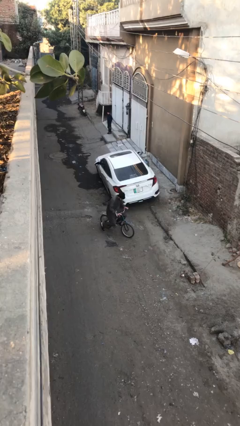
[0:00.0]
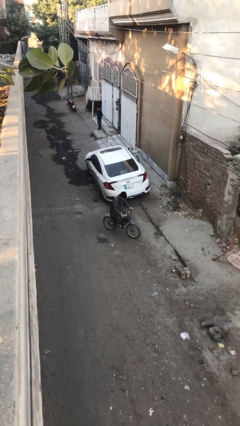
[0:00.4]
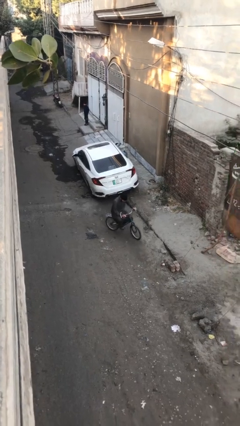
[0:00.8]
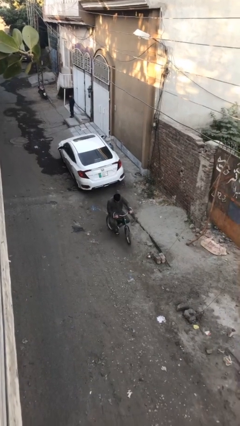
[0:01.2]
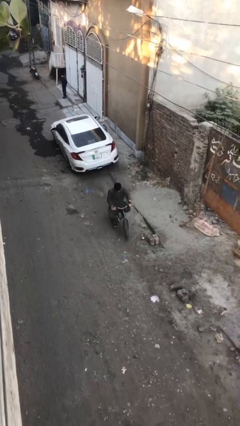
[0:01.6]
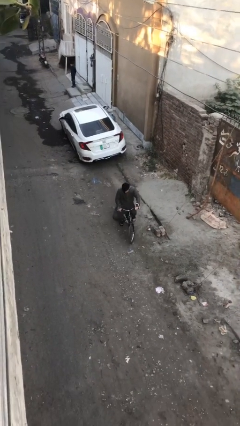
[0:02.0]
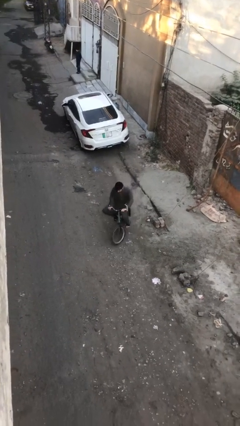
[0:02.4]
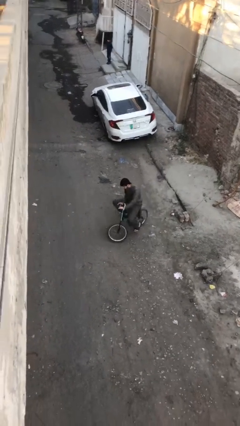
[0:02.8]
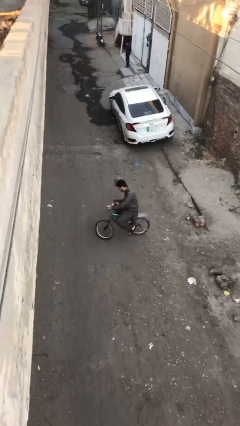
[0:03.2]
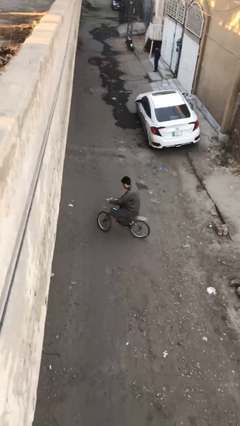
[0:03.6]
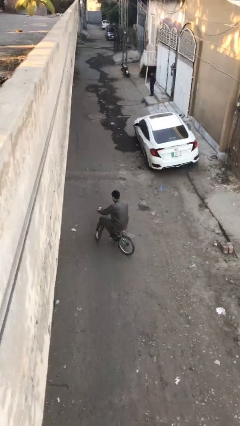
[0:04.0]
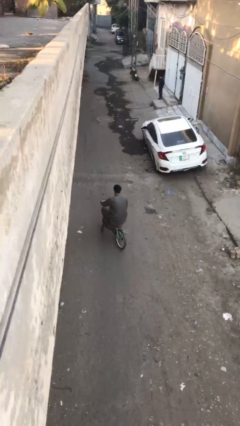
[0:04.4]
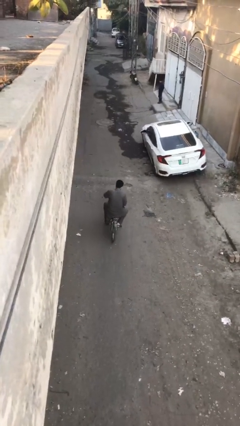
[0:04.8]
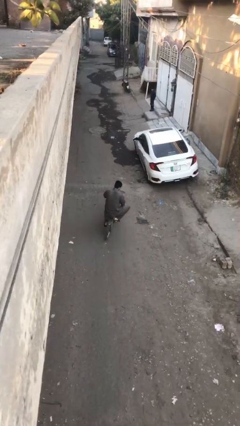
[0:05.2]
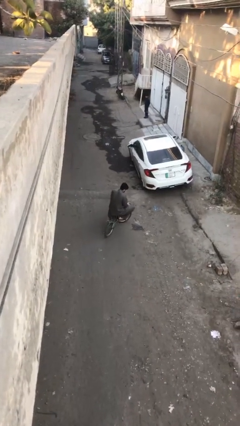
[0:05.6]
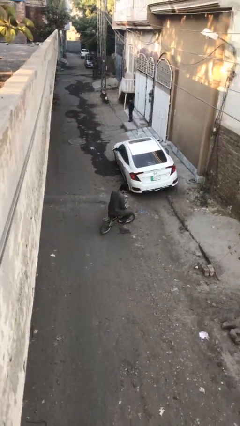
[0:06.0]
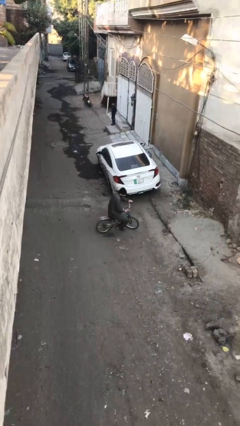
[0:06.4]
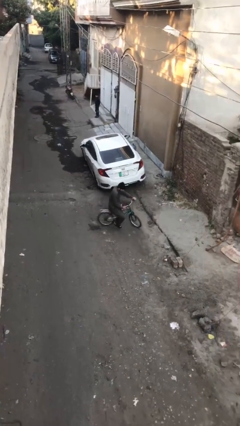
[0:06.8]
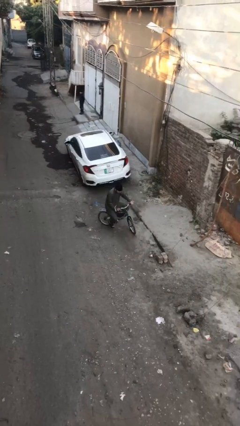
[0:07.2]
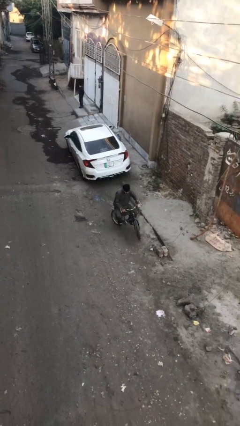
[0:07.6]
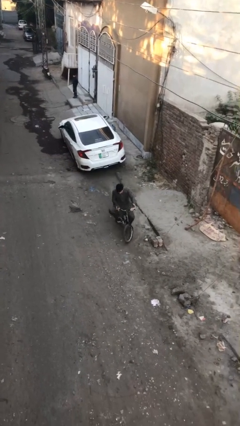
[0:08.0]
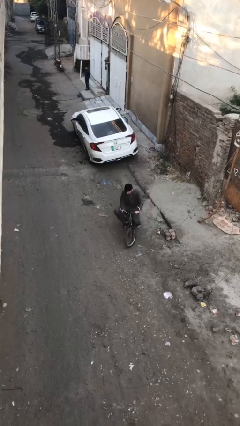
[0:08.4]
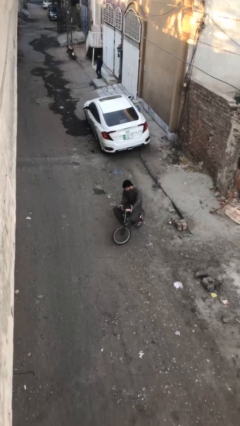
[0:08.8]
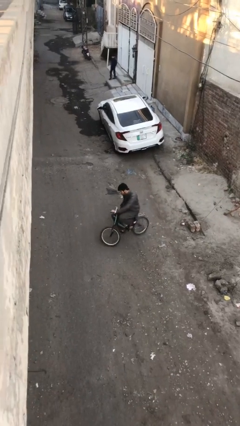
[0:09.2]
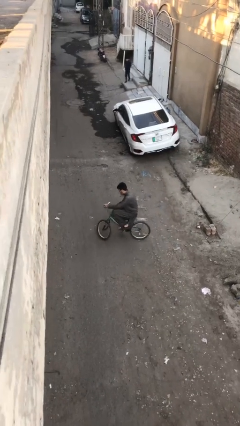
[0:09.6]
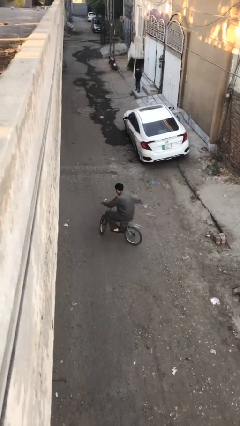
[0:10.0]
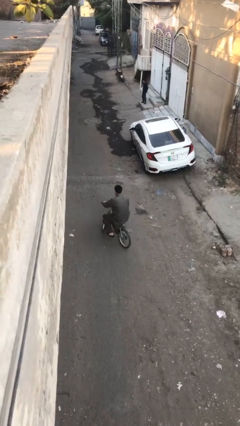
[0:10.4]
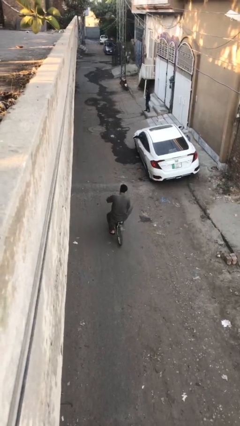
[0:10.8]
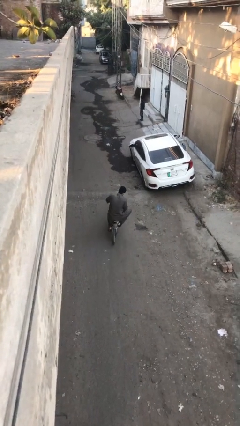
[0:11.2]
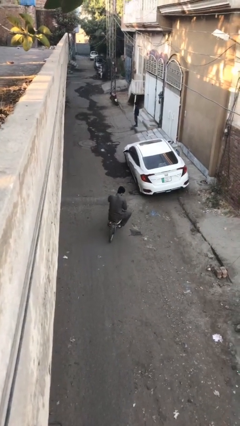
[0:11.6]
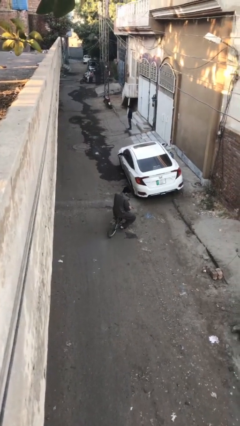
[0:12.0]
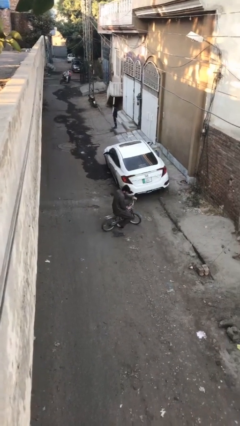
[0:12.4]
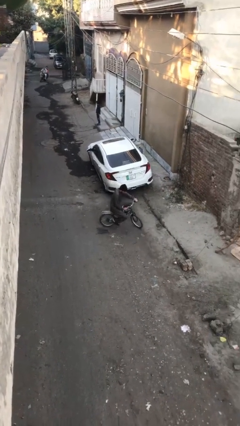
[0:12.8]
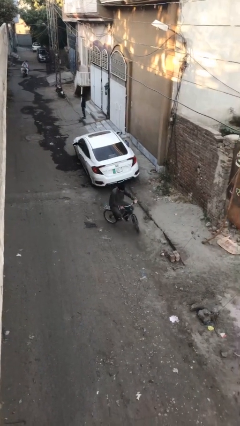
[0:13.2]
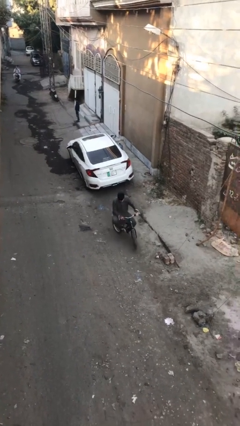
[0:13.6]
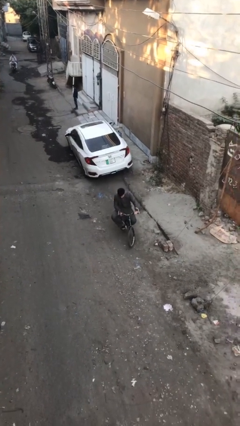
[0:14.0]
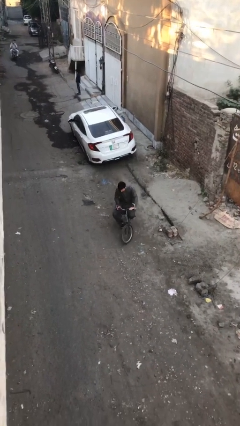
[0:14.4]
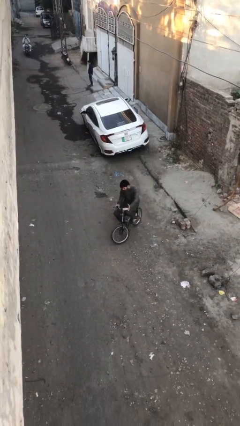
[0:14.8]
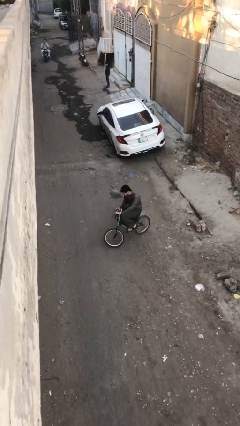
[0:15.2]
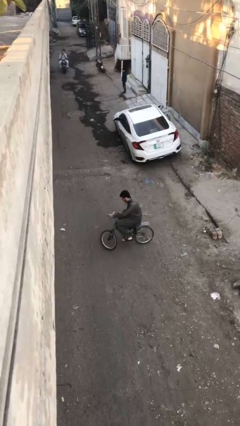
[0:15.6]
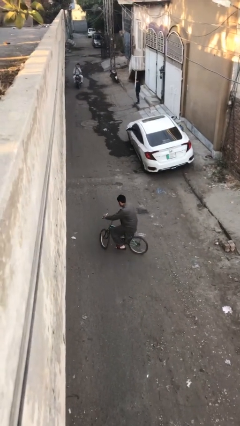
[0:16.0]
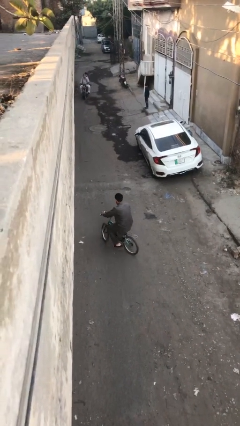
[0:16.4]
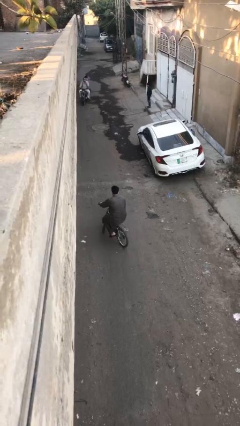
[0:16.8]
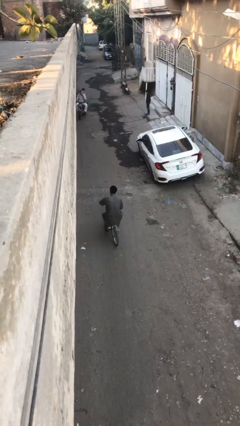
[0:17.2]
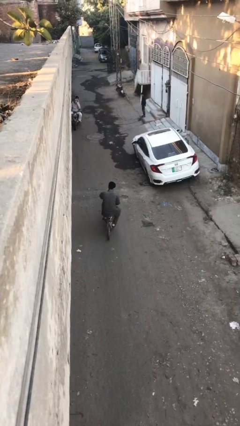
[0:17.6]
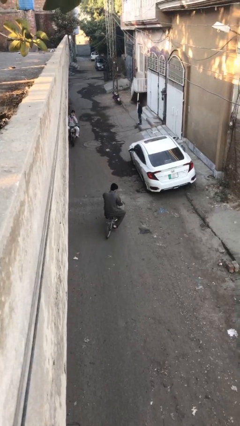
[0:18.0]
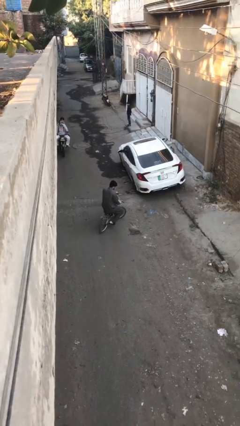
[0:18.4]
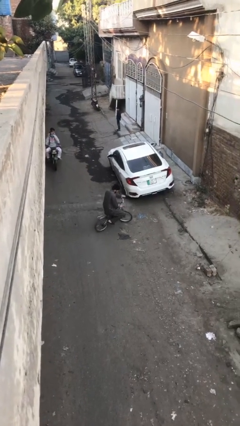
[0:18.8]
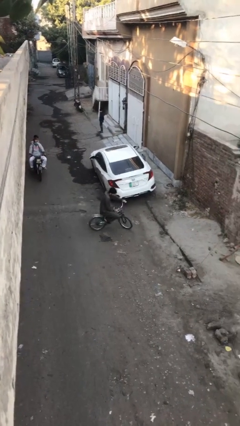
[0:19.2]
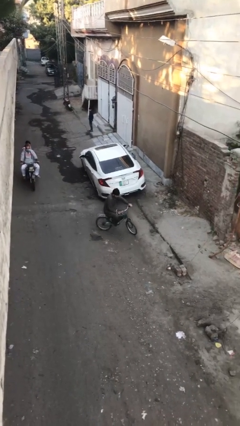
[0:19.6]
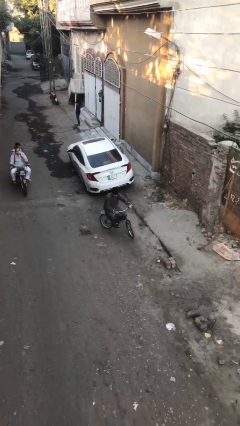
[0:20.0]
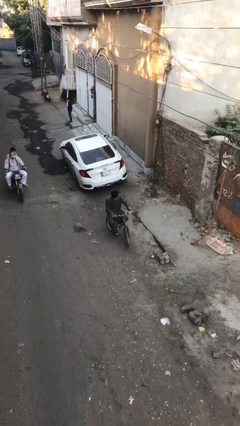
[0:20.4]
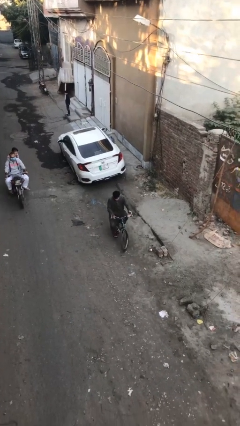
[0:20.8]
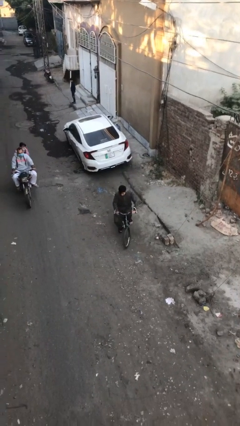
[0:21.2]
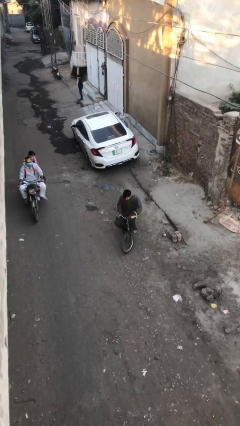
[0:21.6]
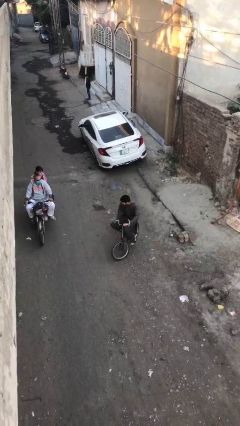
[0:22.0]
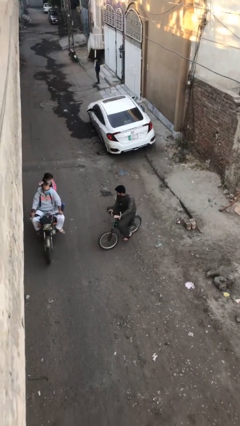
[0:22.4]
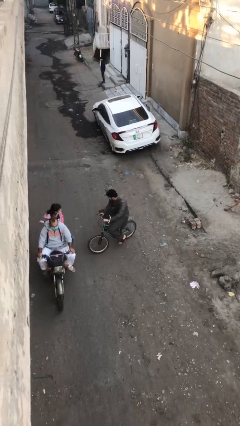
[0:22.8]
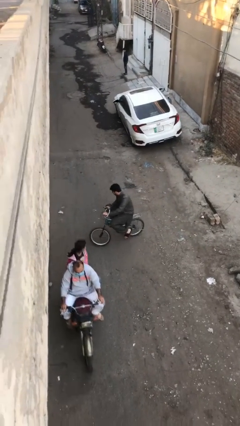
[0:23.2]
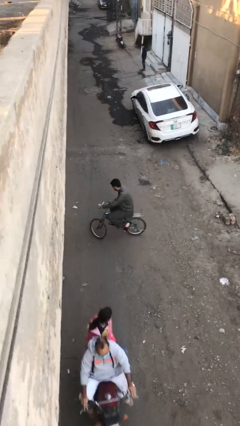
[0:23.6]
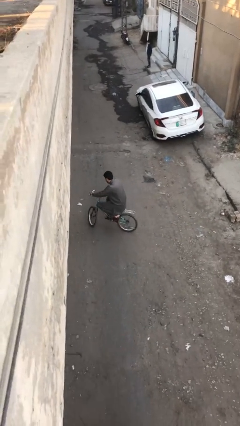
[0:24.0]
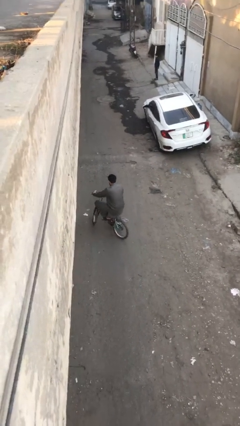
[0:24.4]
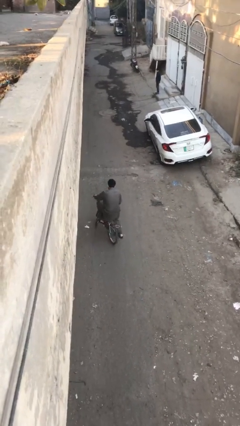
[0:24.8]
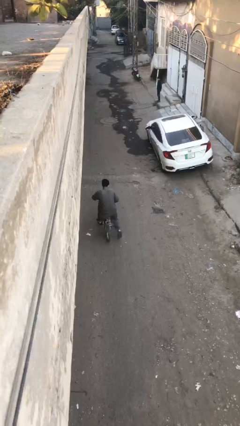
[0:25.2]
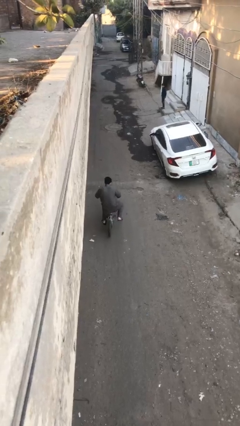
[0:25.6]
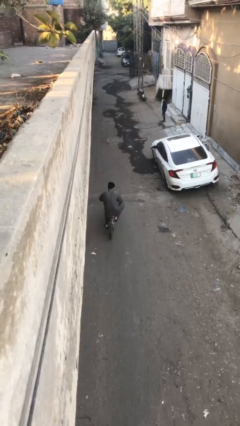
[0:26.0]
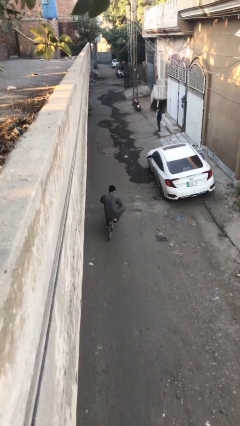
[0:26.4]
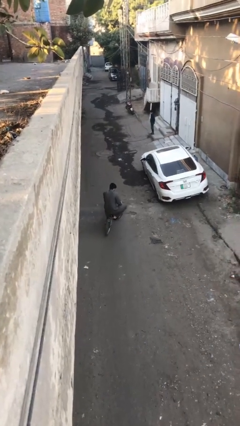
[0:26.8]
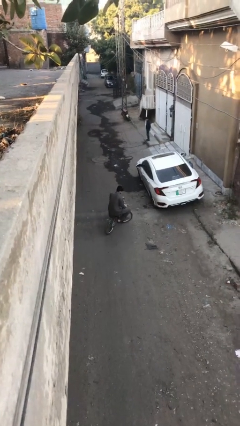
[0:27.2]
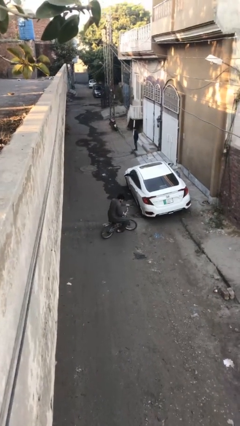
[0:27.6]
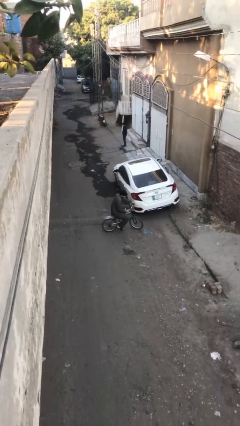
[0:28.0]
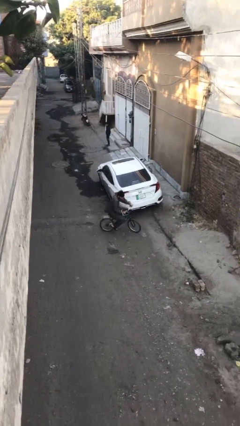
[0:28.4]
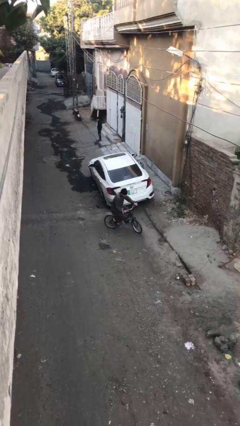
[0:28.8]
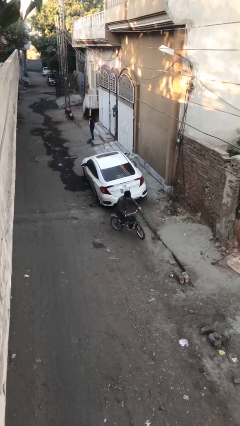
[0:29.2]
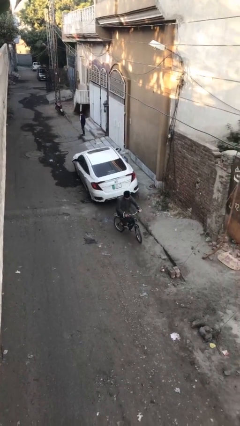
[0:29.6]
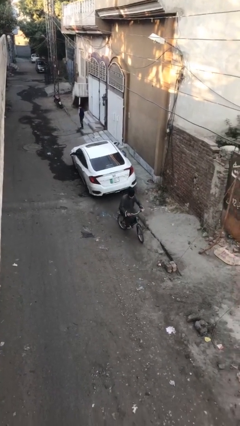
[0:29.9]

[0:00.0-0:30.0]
person rides bicycle

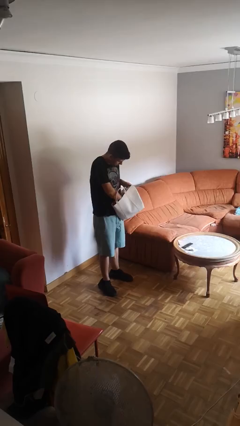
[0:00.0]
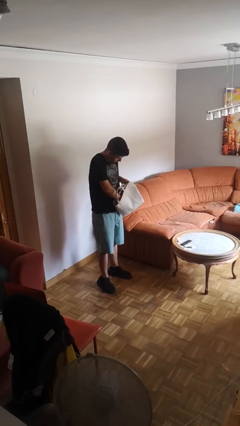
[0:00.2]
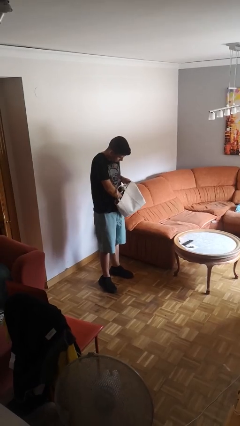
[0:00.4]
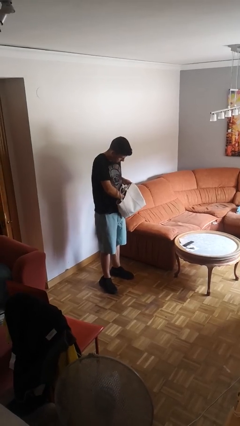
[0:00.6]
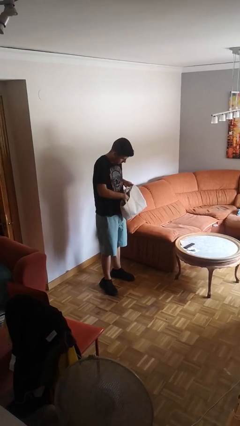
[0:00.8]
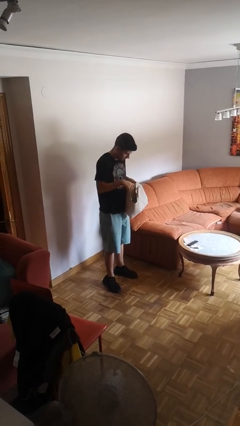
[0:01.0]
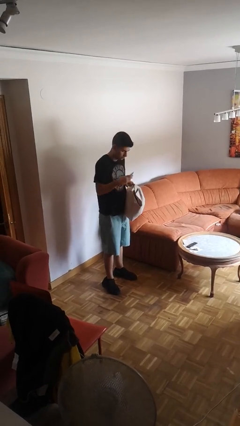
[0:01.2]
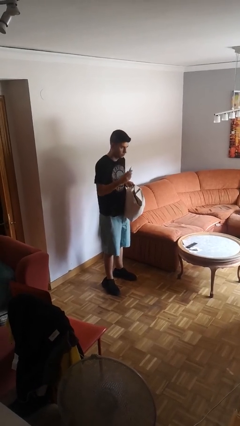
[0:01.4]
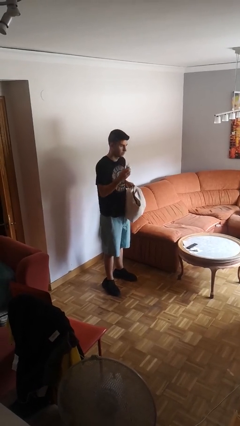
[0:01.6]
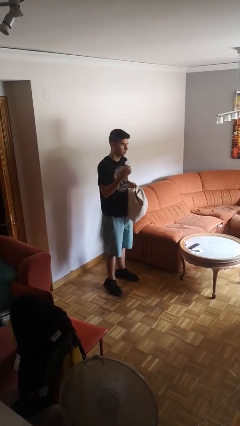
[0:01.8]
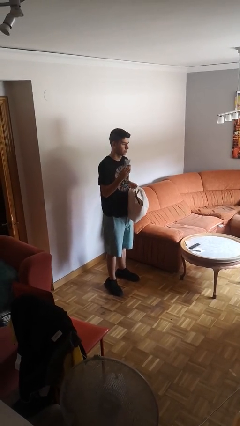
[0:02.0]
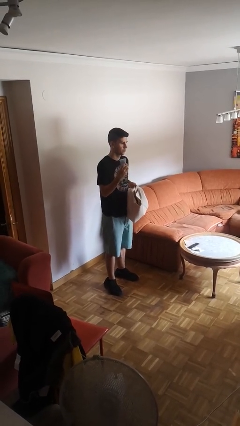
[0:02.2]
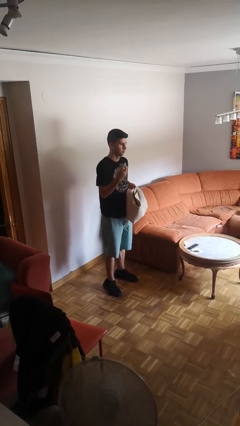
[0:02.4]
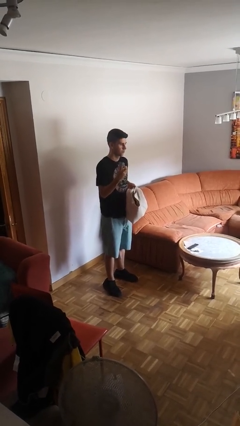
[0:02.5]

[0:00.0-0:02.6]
person takes object from purse

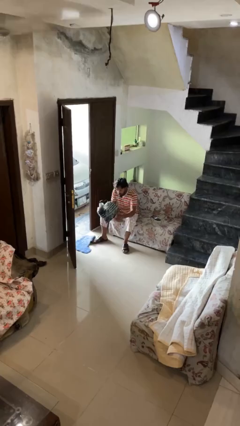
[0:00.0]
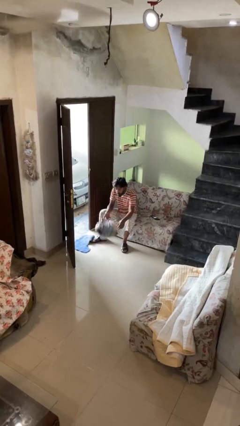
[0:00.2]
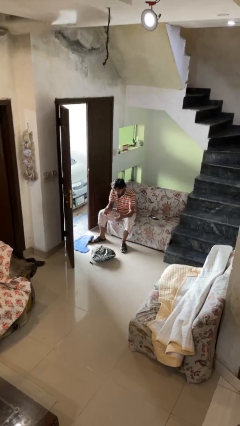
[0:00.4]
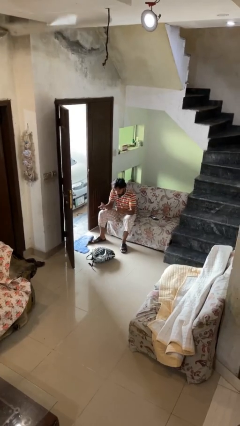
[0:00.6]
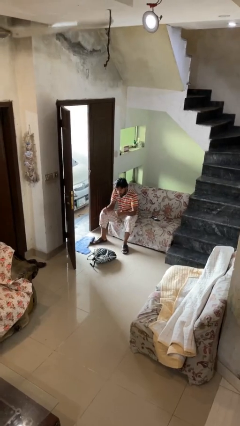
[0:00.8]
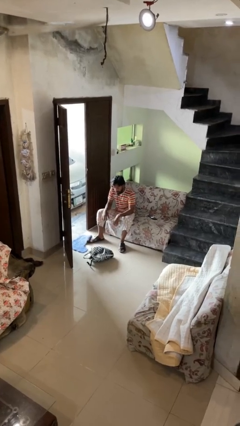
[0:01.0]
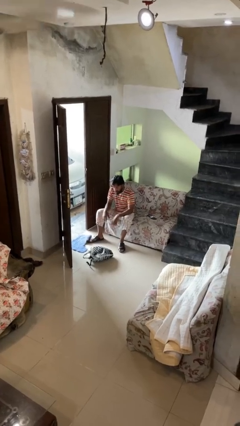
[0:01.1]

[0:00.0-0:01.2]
person drops object
